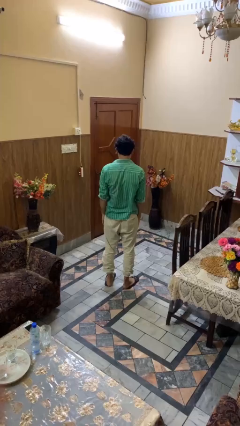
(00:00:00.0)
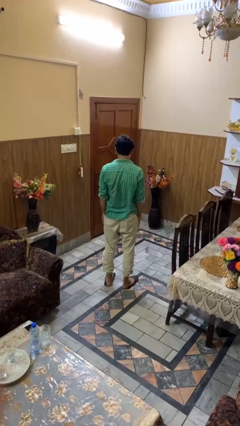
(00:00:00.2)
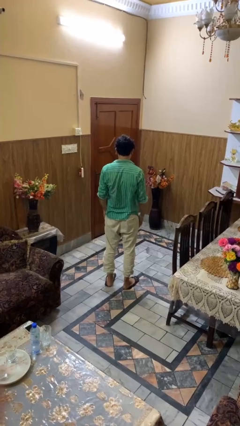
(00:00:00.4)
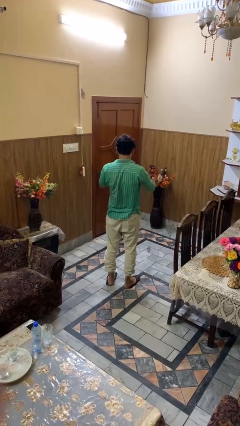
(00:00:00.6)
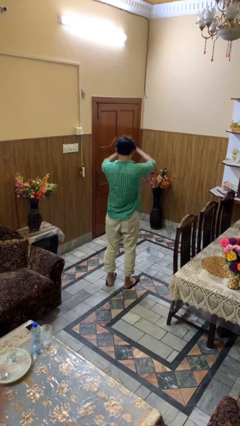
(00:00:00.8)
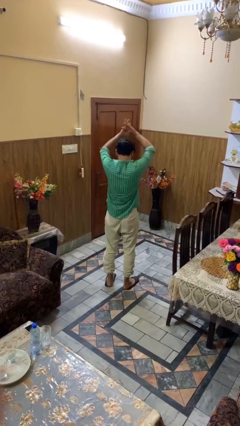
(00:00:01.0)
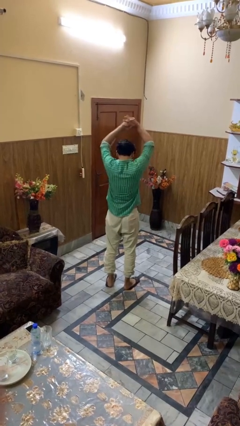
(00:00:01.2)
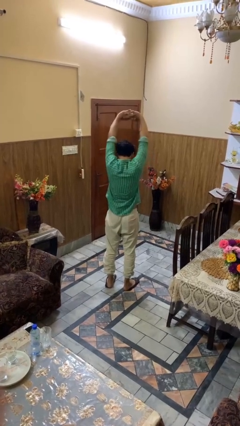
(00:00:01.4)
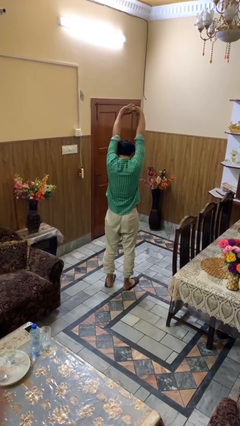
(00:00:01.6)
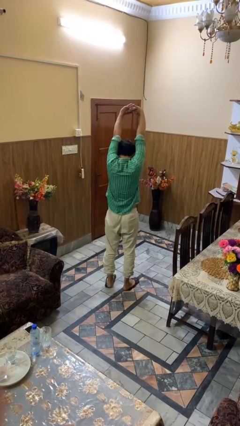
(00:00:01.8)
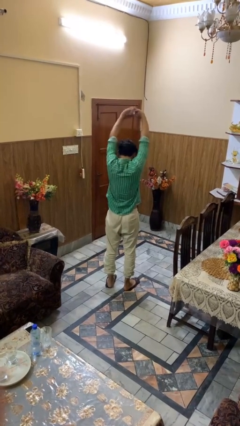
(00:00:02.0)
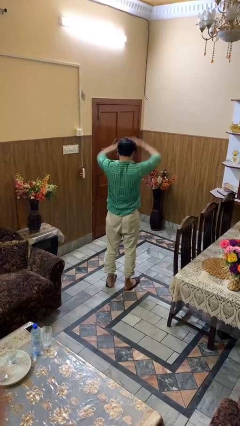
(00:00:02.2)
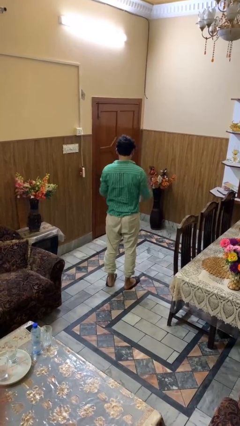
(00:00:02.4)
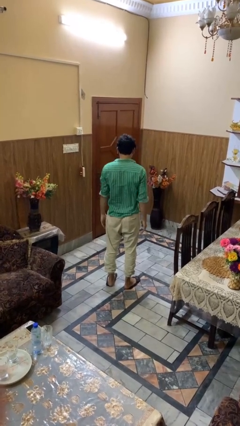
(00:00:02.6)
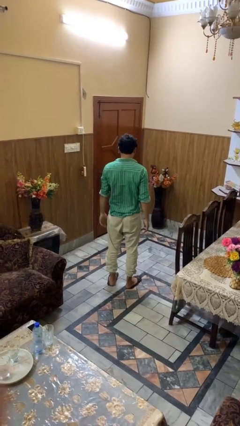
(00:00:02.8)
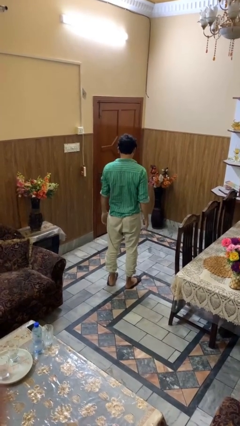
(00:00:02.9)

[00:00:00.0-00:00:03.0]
person stretches arms over head

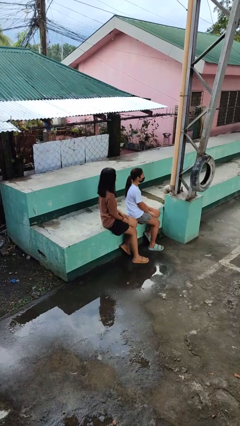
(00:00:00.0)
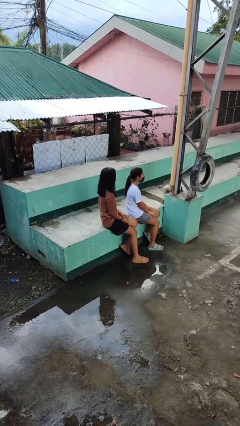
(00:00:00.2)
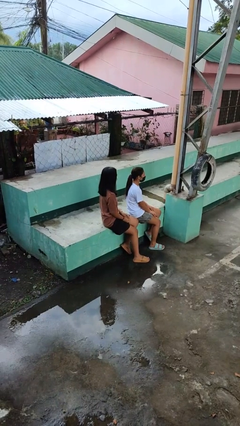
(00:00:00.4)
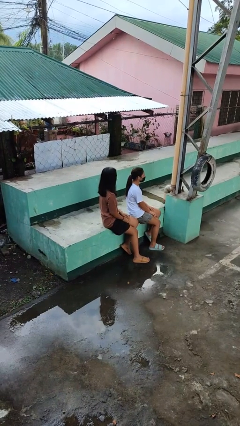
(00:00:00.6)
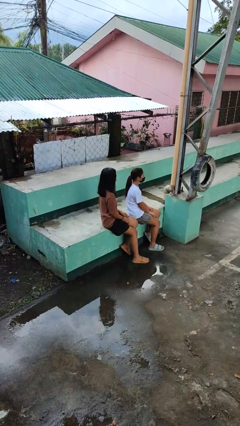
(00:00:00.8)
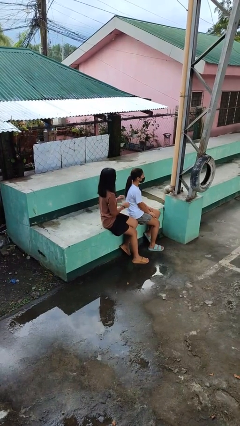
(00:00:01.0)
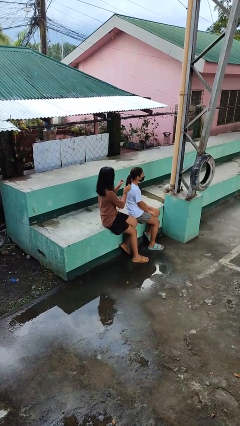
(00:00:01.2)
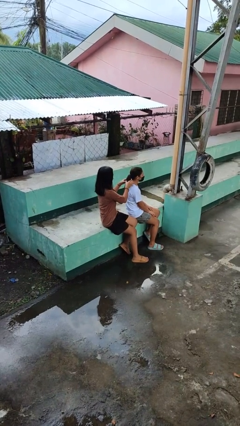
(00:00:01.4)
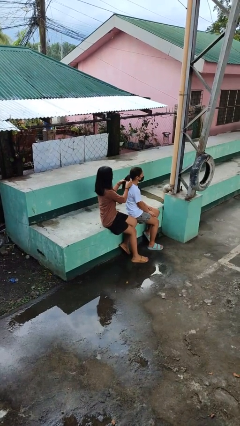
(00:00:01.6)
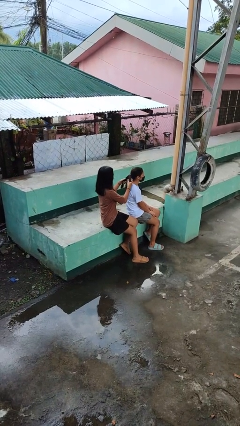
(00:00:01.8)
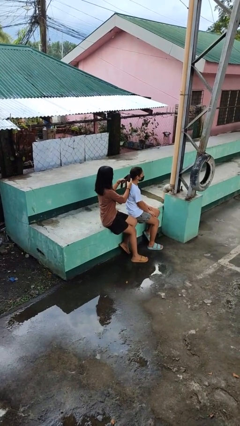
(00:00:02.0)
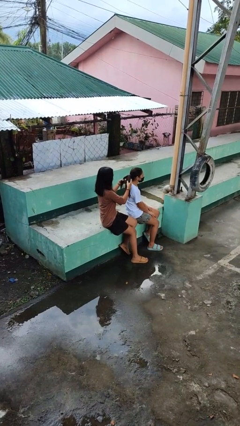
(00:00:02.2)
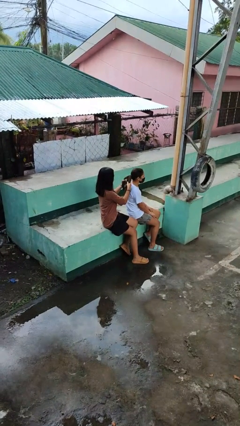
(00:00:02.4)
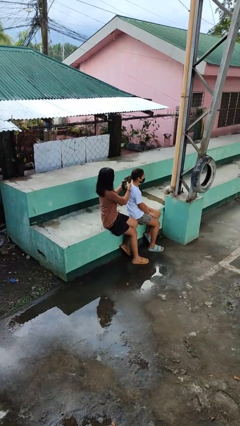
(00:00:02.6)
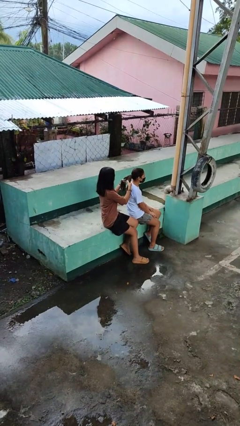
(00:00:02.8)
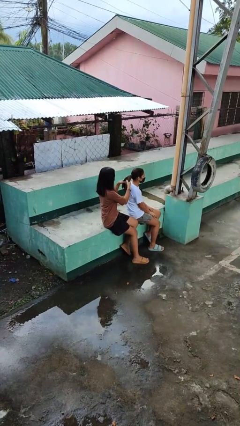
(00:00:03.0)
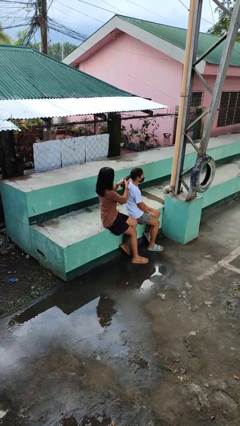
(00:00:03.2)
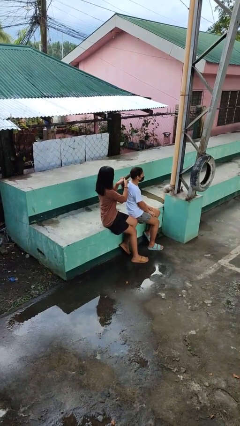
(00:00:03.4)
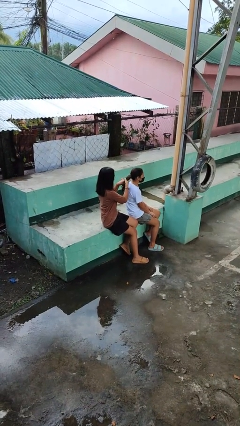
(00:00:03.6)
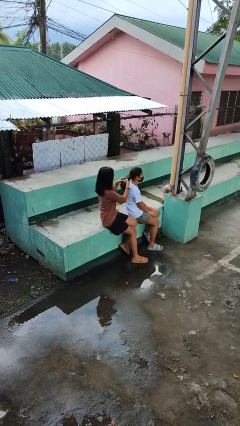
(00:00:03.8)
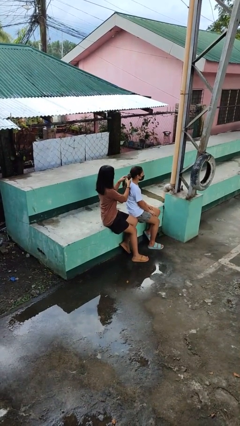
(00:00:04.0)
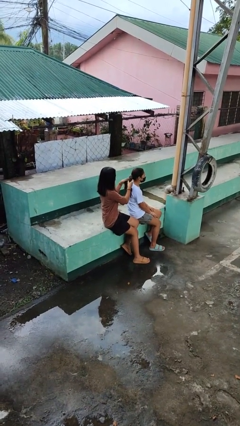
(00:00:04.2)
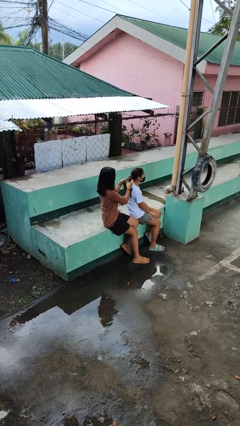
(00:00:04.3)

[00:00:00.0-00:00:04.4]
person braids hair of person

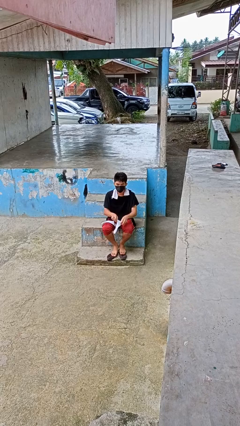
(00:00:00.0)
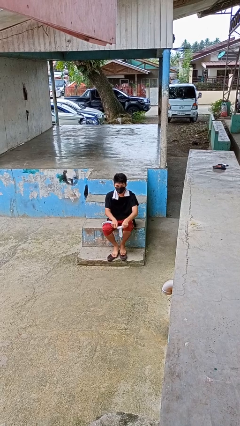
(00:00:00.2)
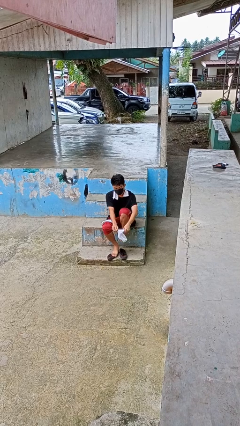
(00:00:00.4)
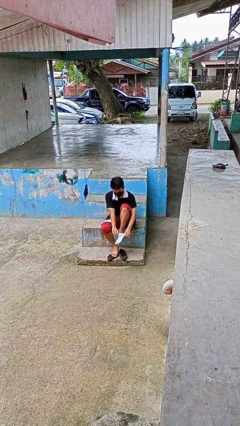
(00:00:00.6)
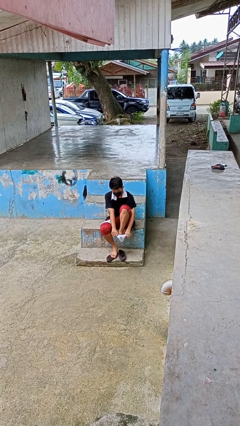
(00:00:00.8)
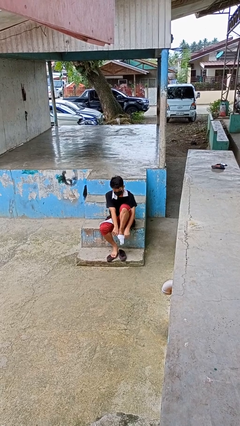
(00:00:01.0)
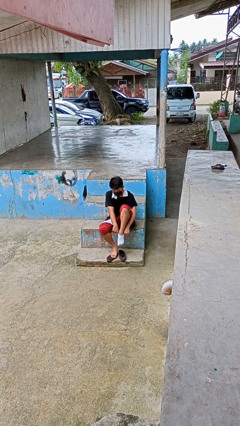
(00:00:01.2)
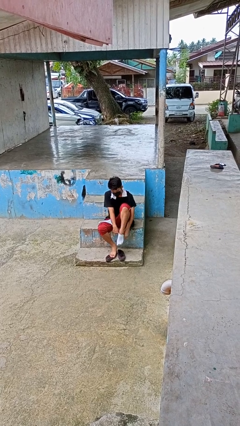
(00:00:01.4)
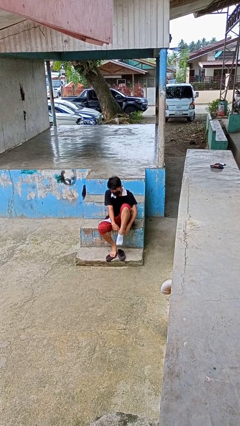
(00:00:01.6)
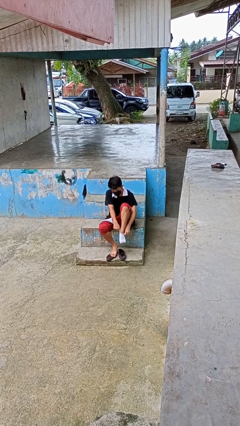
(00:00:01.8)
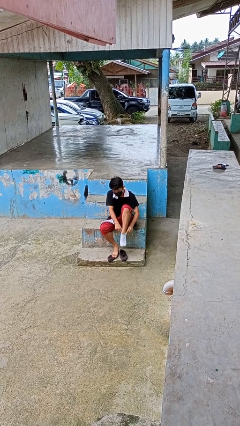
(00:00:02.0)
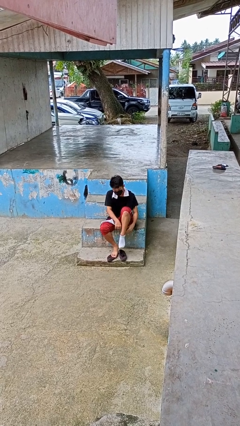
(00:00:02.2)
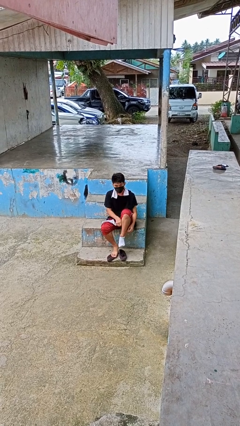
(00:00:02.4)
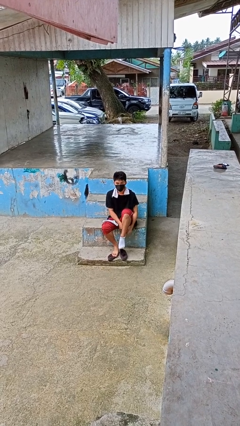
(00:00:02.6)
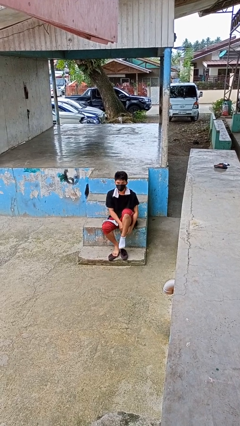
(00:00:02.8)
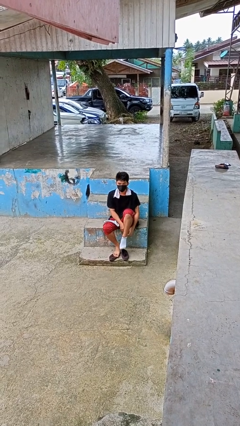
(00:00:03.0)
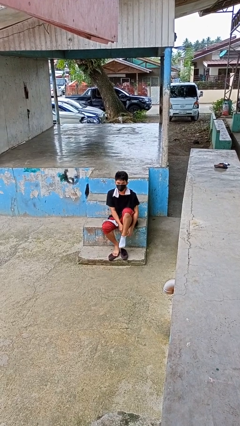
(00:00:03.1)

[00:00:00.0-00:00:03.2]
person puts on socks

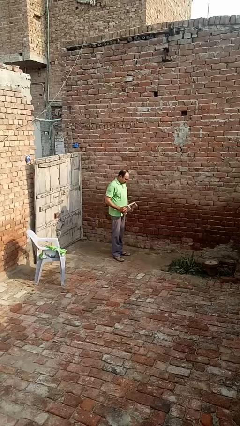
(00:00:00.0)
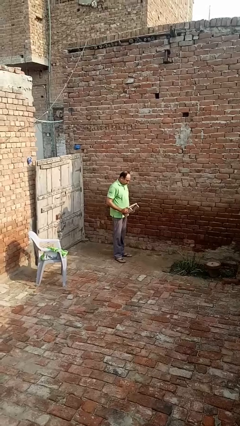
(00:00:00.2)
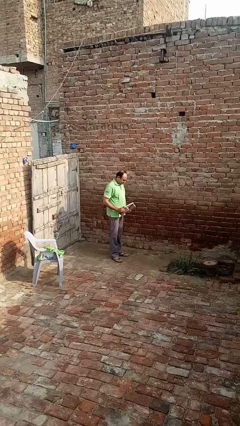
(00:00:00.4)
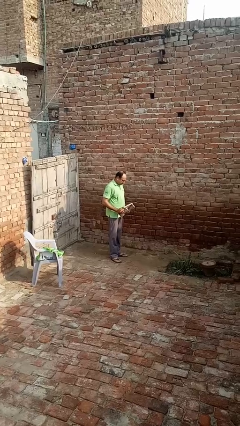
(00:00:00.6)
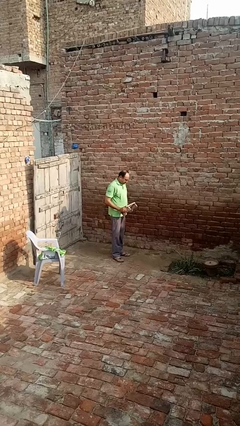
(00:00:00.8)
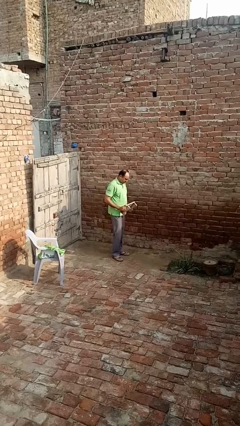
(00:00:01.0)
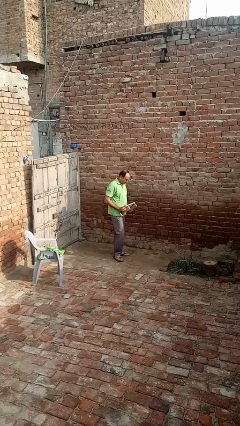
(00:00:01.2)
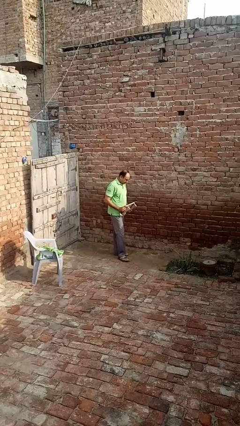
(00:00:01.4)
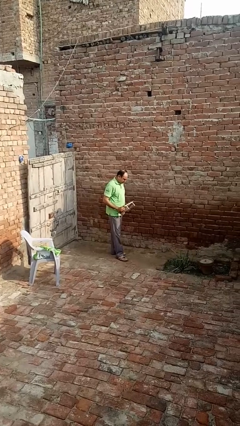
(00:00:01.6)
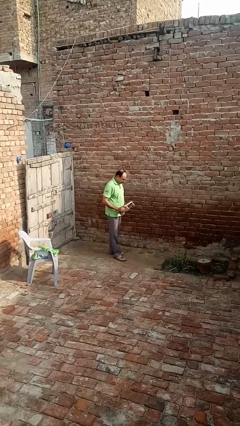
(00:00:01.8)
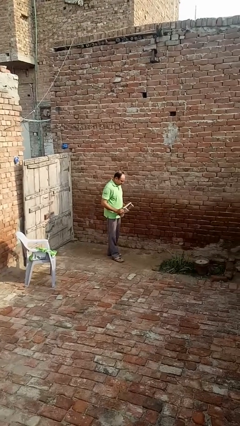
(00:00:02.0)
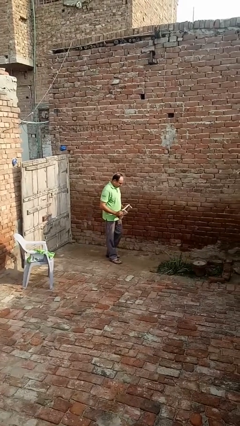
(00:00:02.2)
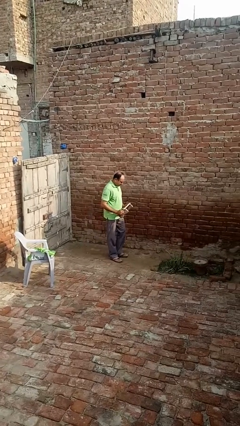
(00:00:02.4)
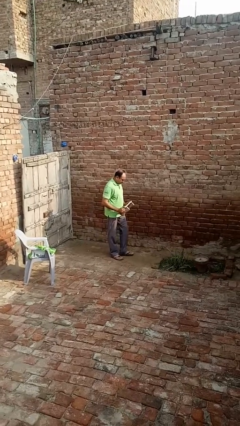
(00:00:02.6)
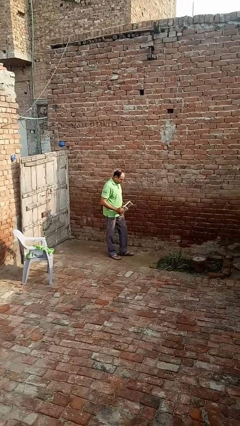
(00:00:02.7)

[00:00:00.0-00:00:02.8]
person carries furniture

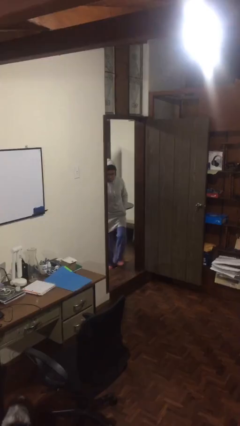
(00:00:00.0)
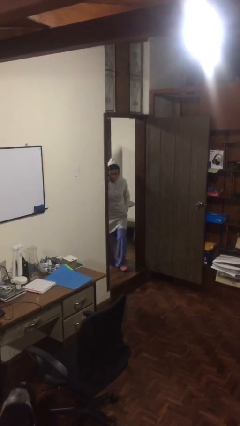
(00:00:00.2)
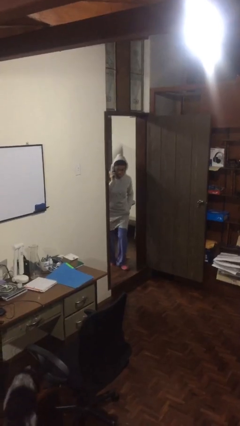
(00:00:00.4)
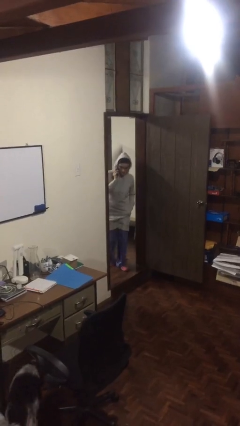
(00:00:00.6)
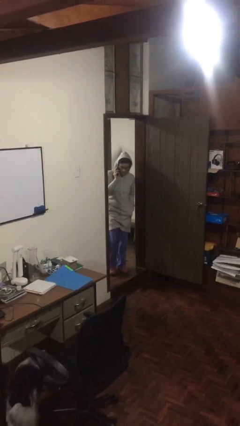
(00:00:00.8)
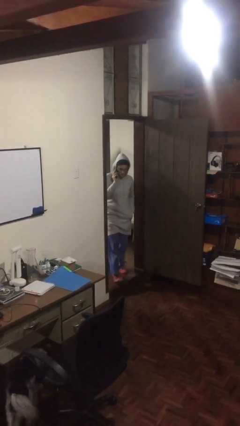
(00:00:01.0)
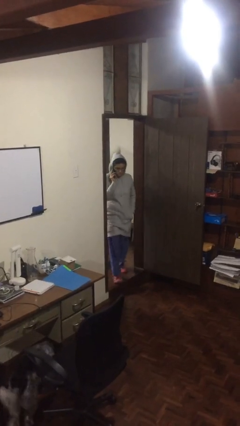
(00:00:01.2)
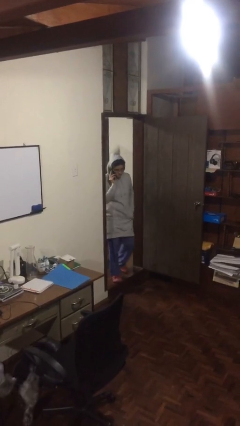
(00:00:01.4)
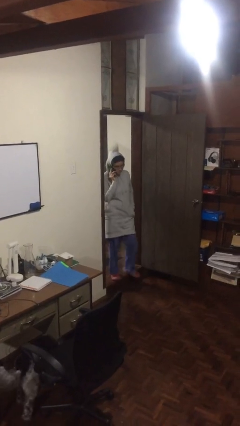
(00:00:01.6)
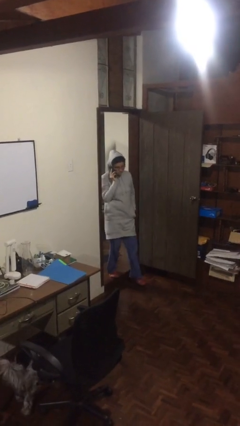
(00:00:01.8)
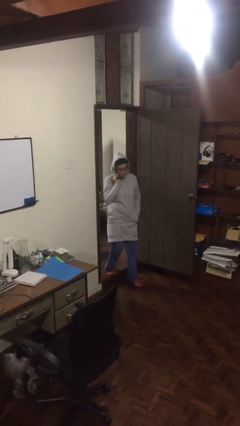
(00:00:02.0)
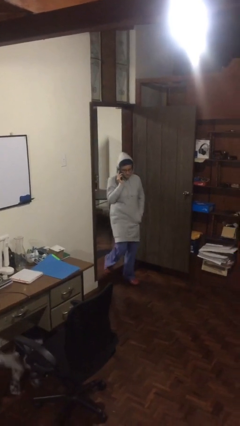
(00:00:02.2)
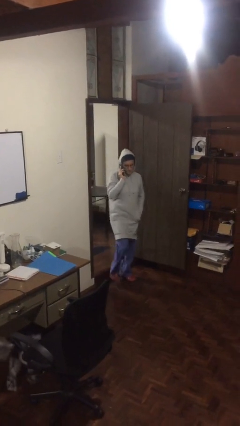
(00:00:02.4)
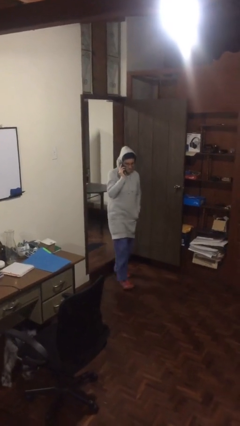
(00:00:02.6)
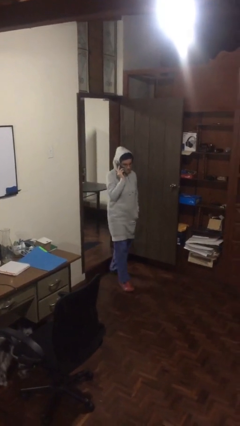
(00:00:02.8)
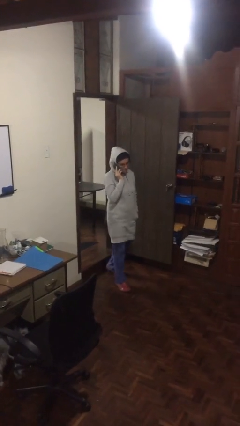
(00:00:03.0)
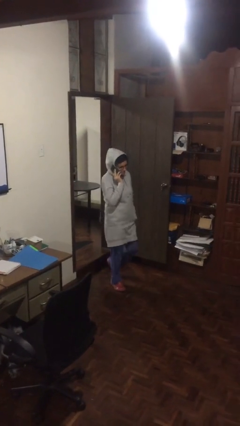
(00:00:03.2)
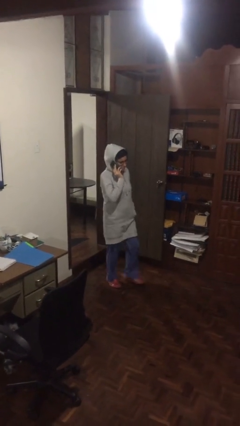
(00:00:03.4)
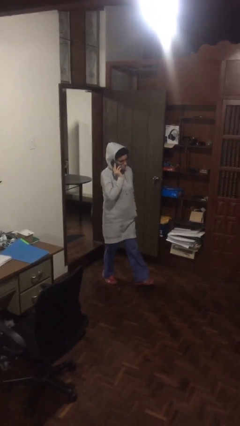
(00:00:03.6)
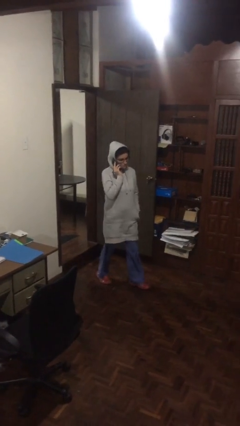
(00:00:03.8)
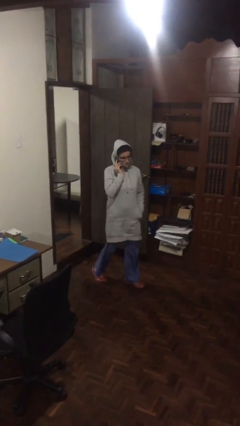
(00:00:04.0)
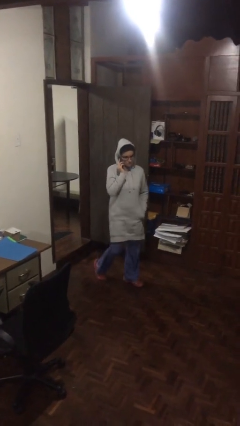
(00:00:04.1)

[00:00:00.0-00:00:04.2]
person enters scene through structure
